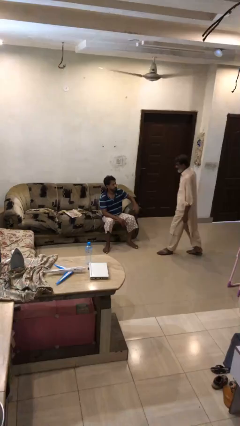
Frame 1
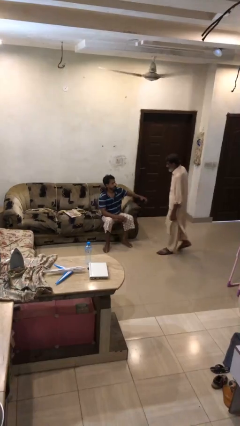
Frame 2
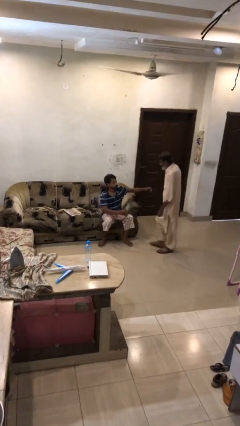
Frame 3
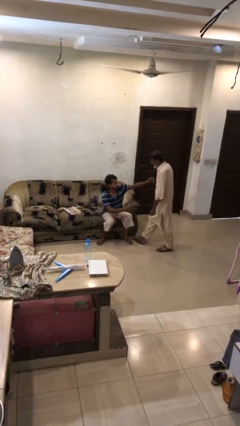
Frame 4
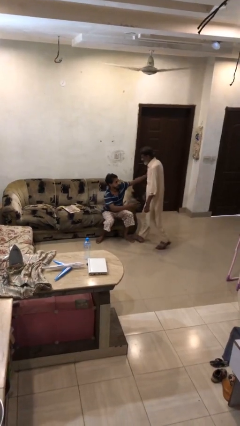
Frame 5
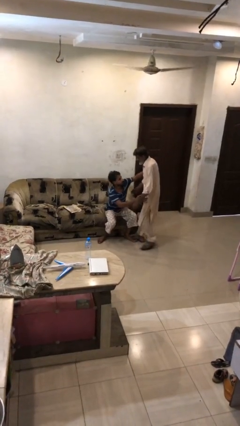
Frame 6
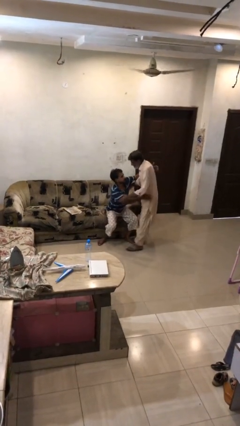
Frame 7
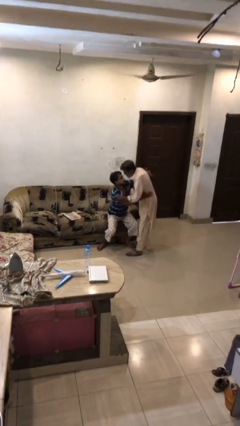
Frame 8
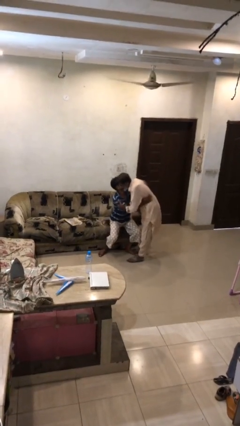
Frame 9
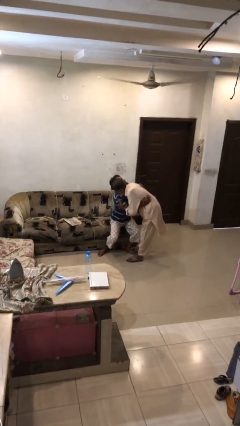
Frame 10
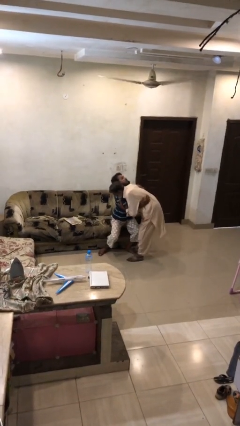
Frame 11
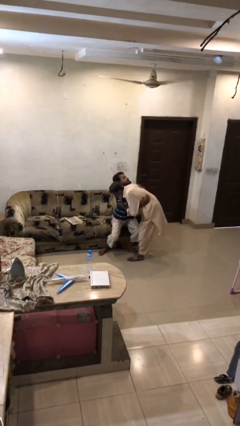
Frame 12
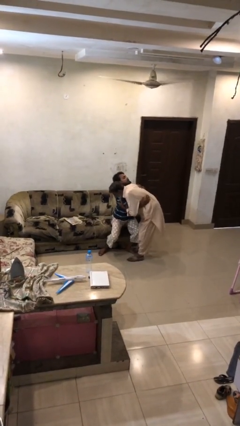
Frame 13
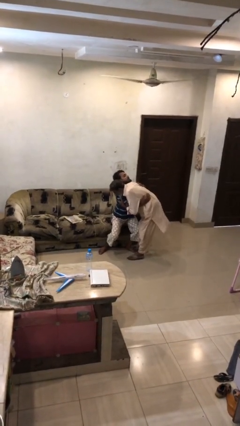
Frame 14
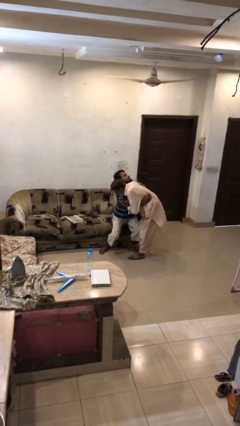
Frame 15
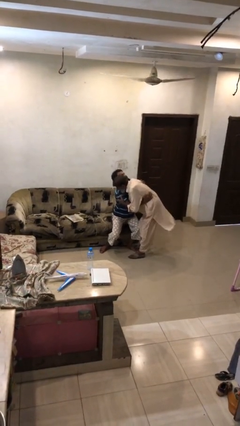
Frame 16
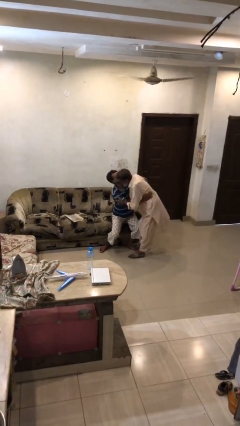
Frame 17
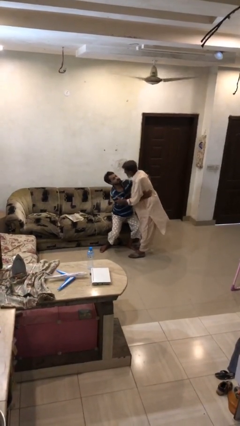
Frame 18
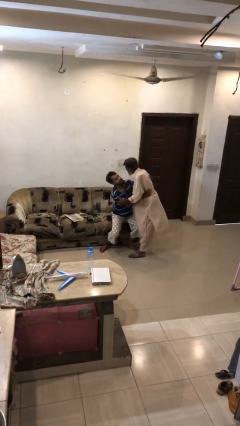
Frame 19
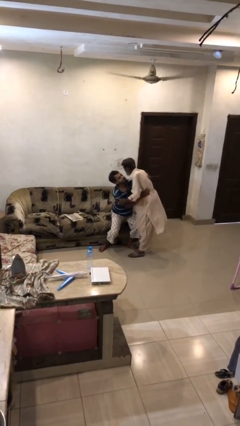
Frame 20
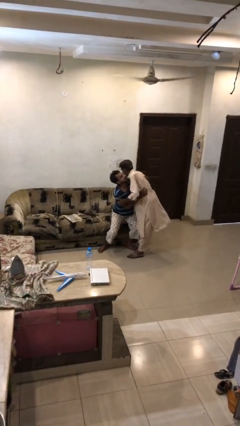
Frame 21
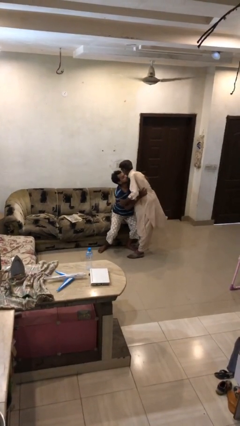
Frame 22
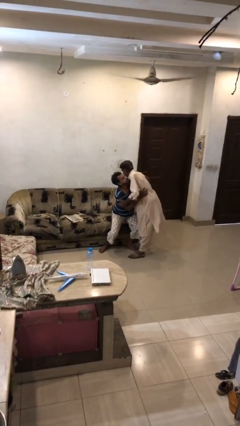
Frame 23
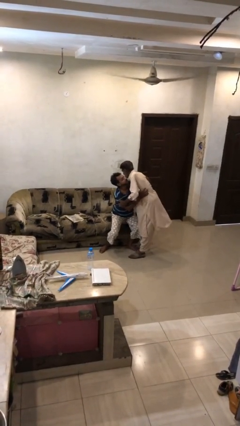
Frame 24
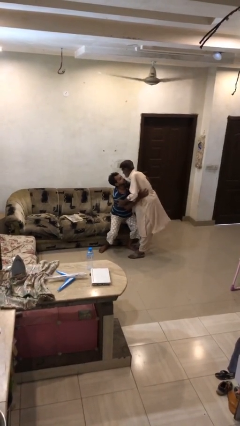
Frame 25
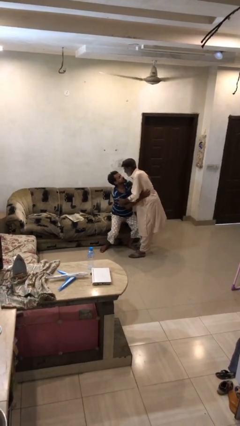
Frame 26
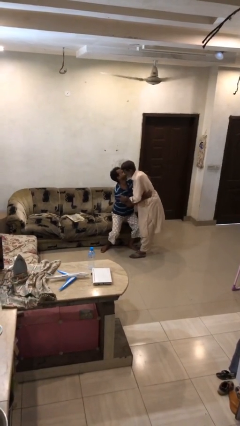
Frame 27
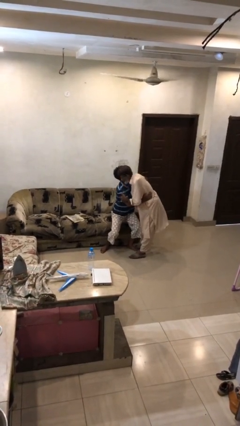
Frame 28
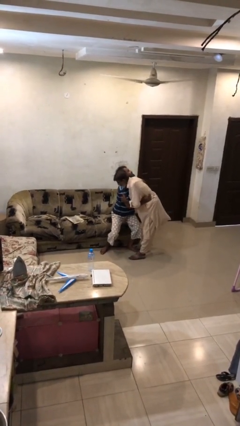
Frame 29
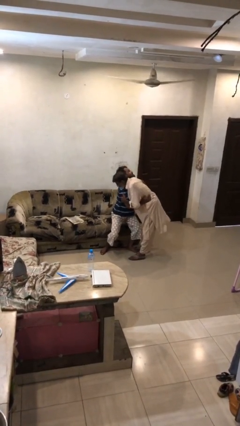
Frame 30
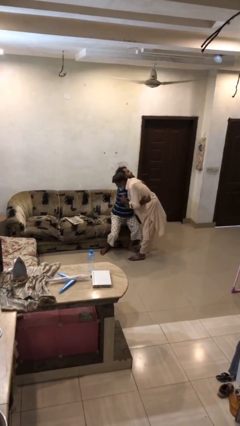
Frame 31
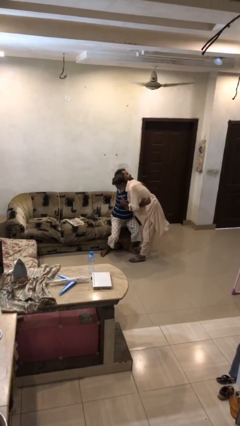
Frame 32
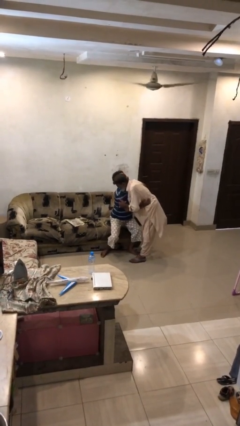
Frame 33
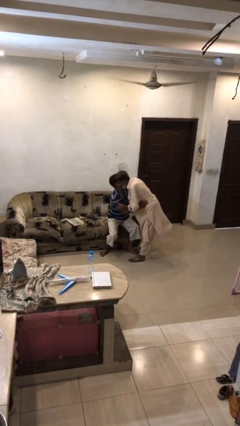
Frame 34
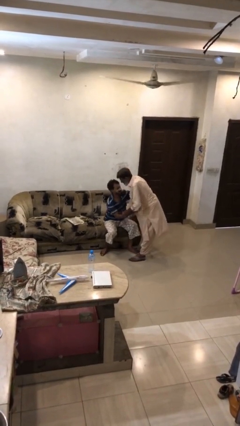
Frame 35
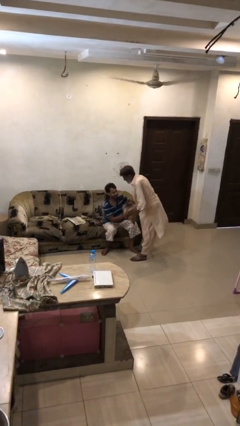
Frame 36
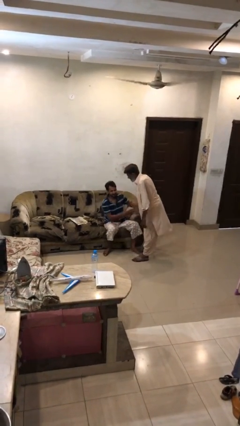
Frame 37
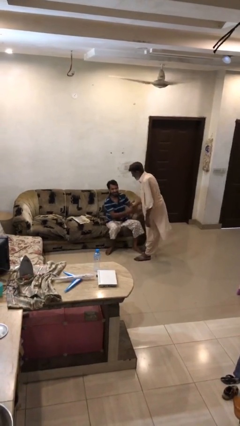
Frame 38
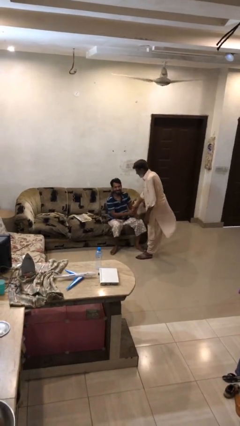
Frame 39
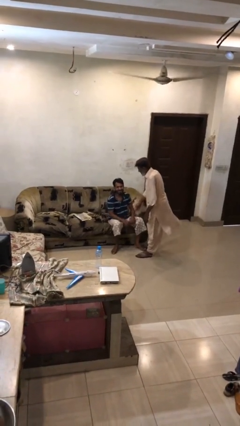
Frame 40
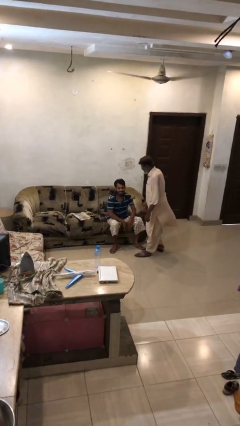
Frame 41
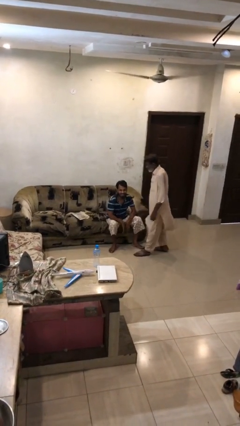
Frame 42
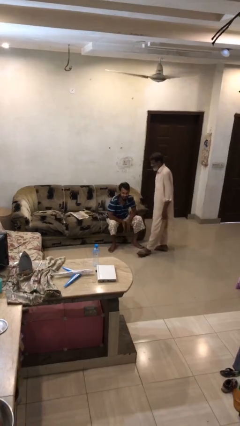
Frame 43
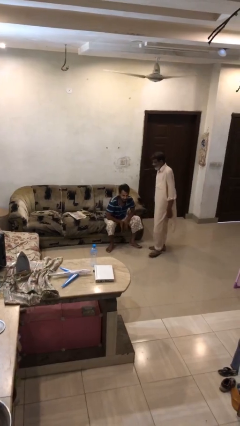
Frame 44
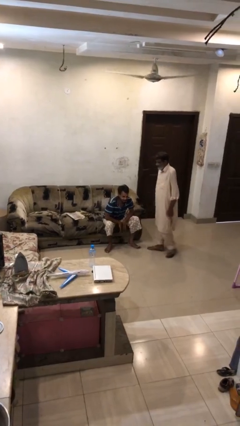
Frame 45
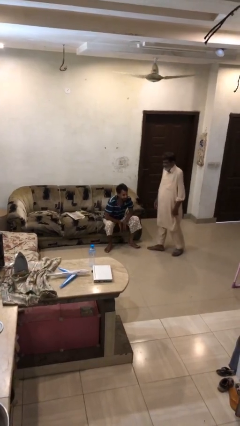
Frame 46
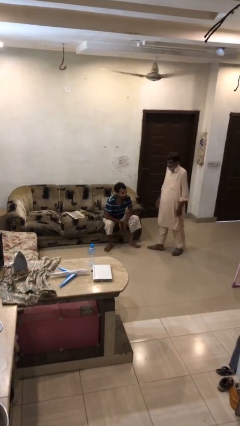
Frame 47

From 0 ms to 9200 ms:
person embraces person

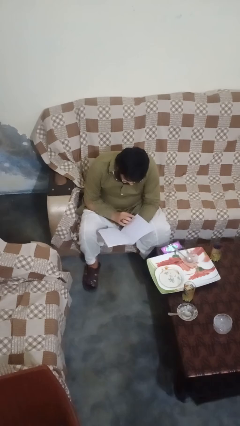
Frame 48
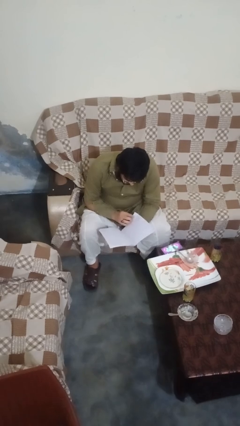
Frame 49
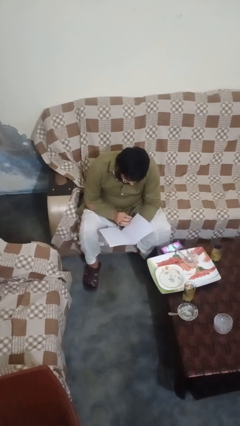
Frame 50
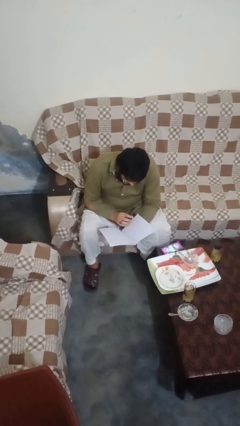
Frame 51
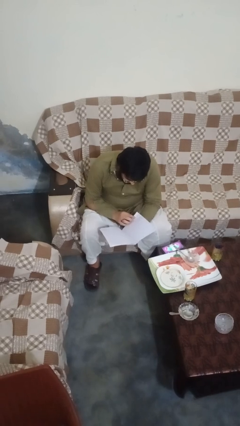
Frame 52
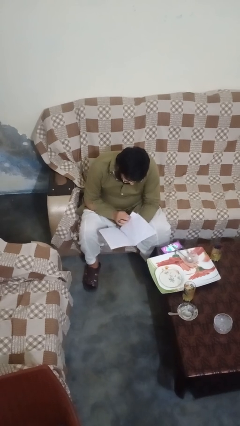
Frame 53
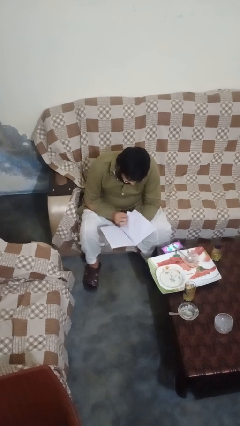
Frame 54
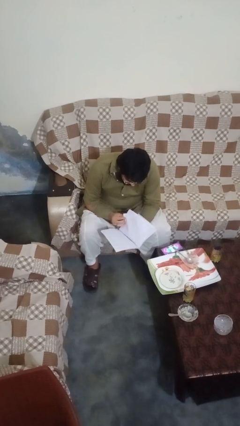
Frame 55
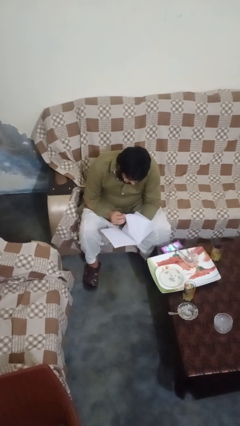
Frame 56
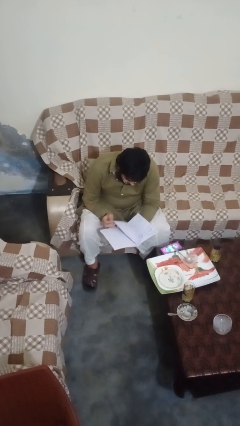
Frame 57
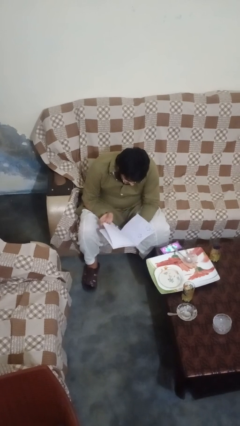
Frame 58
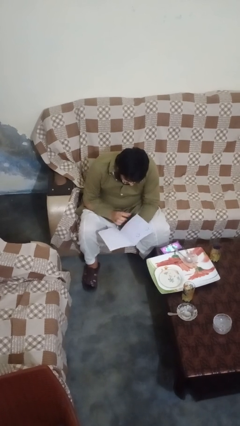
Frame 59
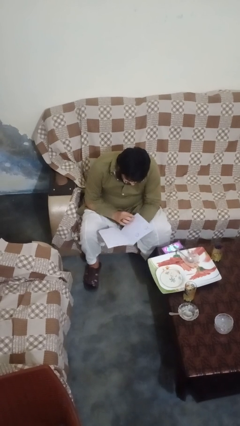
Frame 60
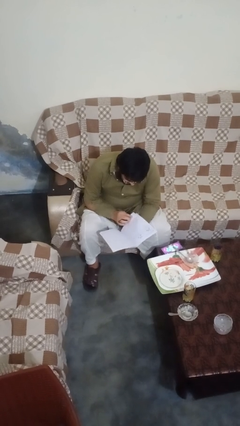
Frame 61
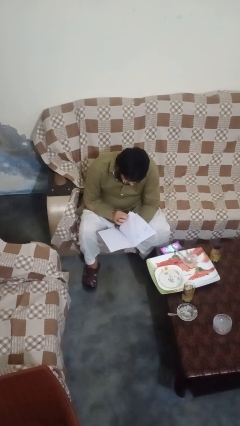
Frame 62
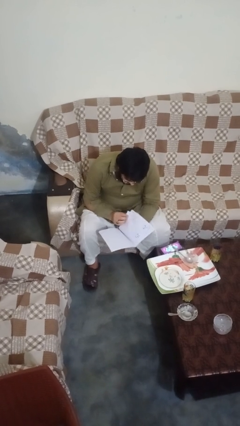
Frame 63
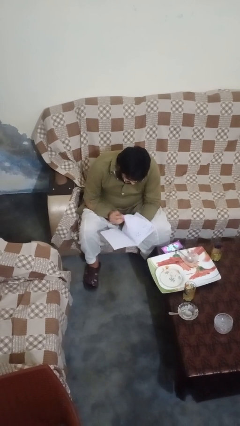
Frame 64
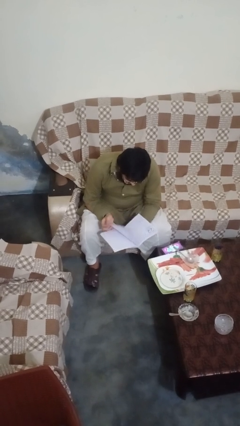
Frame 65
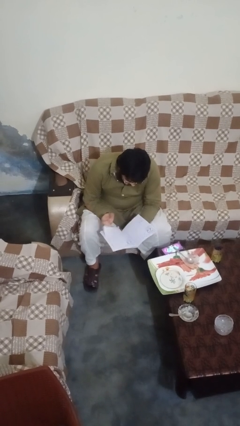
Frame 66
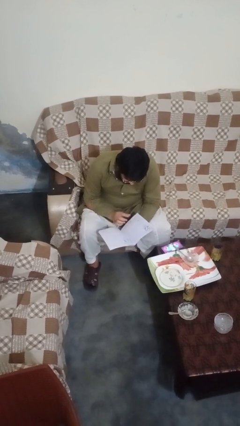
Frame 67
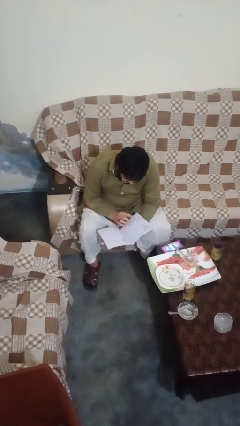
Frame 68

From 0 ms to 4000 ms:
person reads book

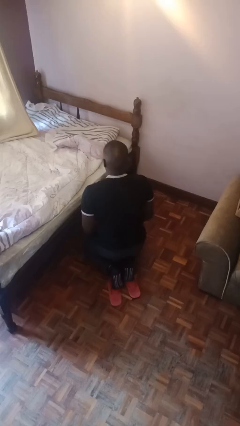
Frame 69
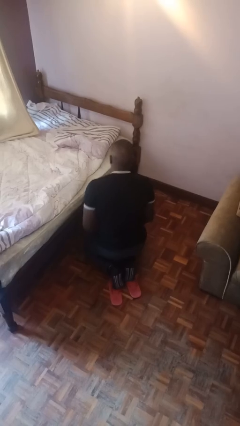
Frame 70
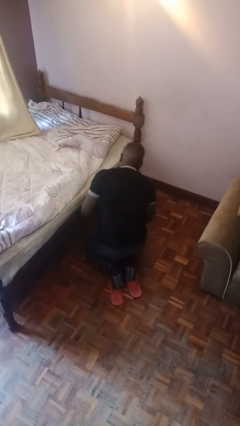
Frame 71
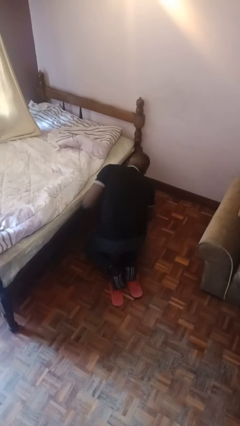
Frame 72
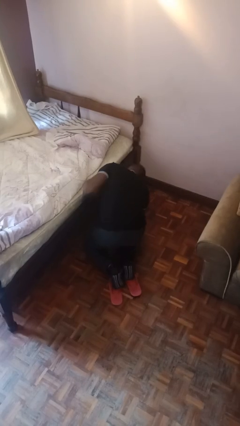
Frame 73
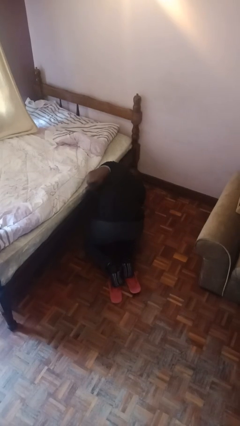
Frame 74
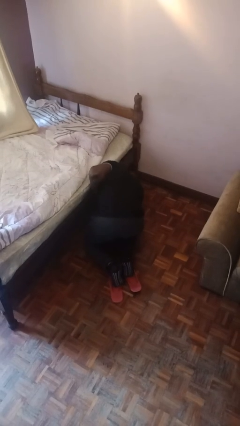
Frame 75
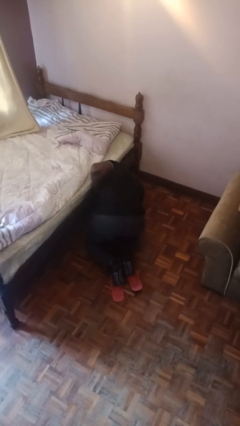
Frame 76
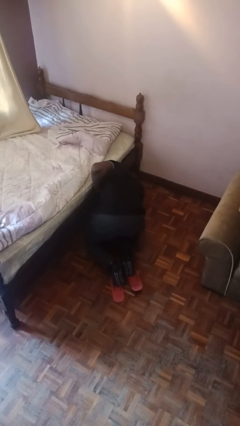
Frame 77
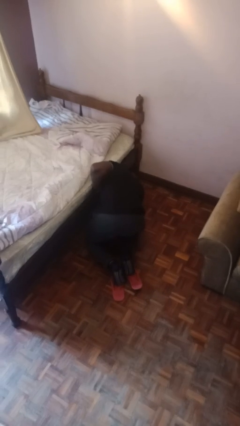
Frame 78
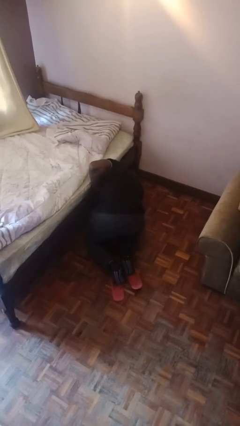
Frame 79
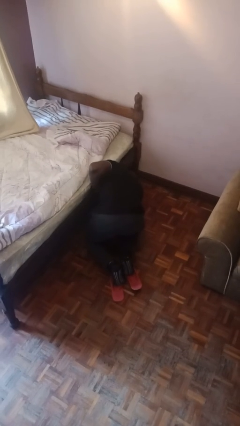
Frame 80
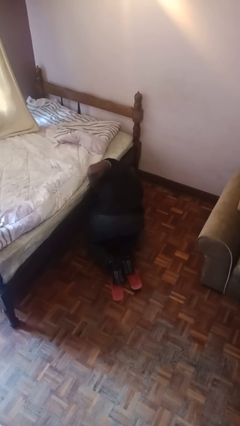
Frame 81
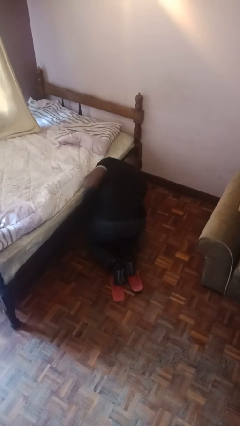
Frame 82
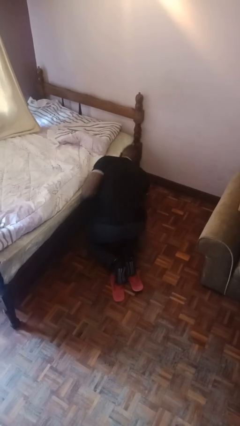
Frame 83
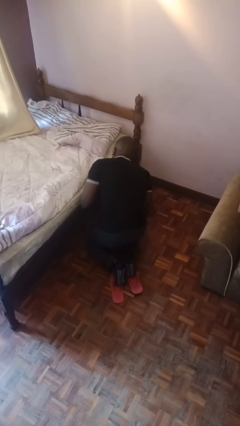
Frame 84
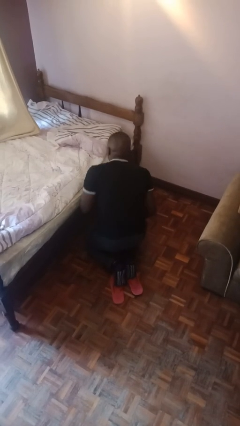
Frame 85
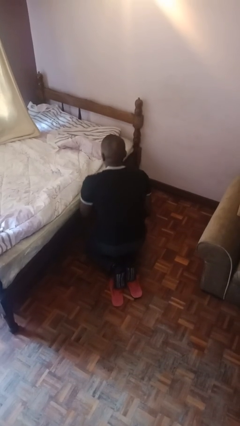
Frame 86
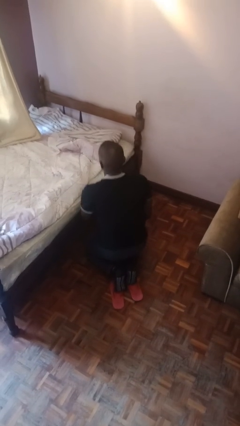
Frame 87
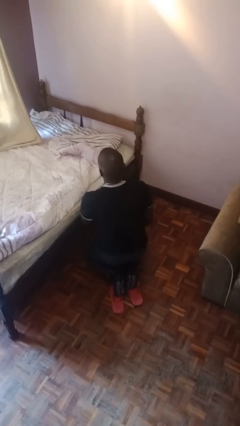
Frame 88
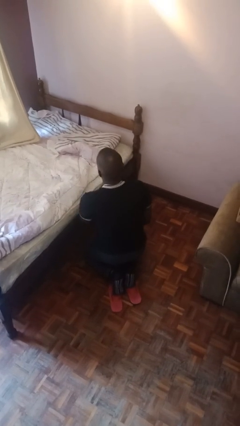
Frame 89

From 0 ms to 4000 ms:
person searches under bed

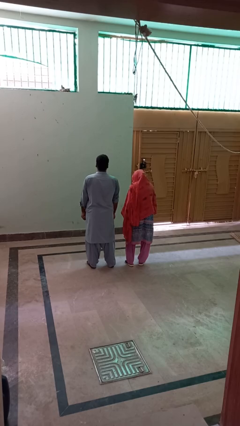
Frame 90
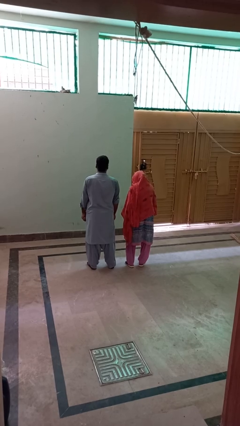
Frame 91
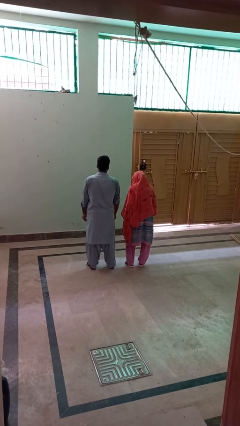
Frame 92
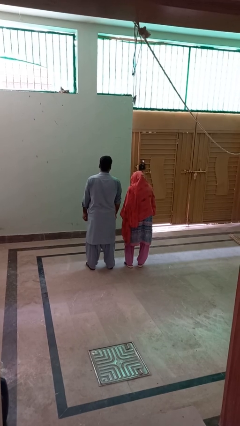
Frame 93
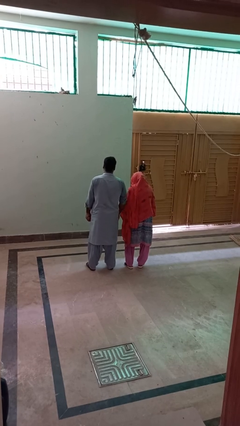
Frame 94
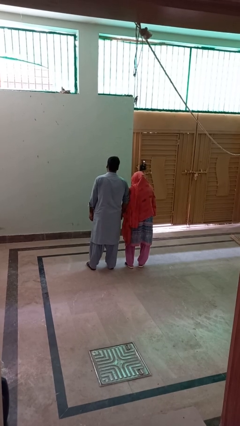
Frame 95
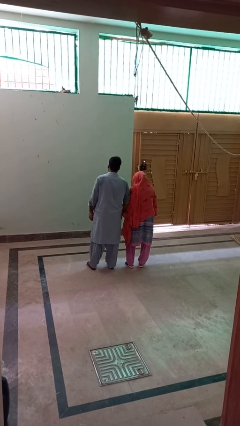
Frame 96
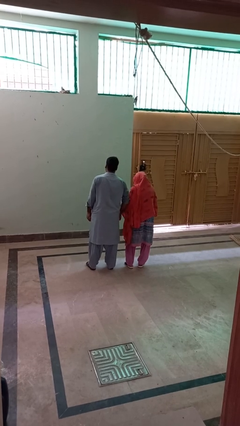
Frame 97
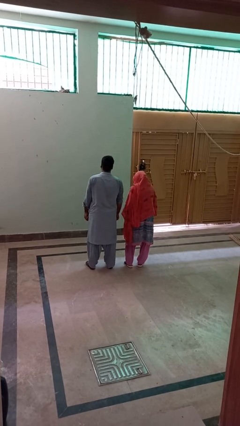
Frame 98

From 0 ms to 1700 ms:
person nudges person with elbow
